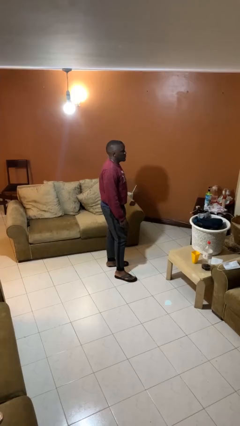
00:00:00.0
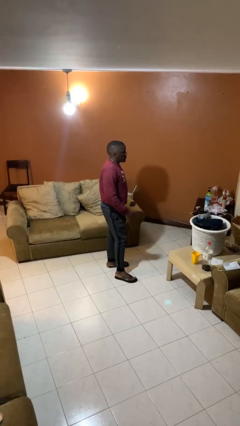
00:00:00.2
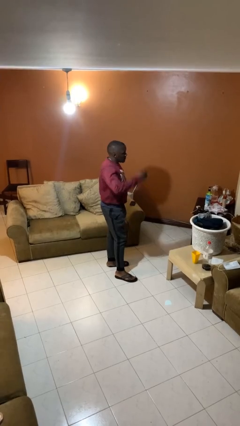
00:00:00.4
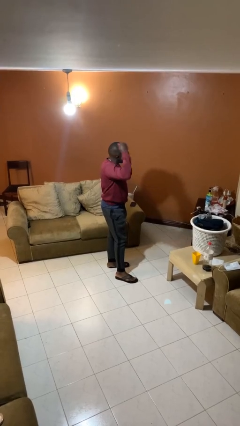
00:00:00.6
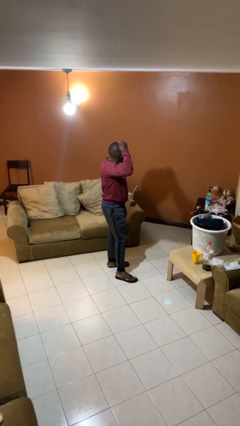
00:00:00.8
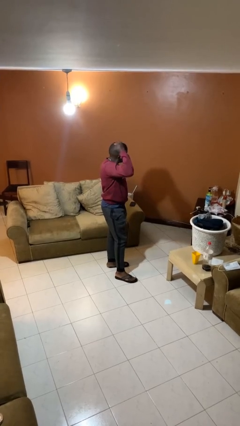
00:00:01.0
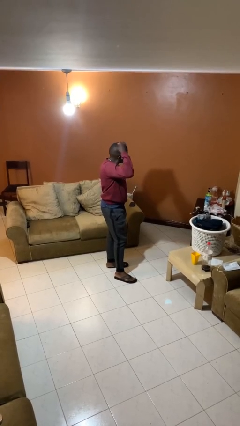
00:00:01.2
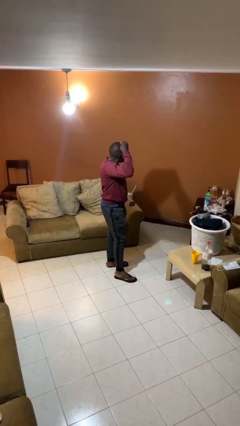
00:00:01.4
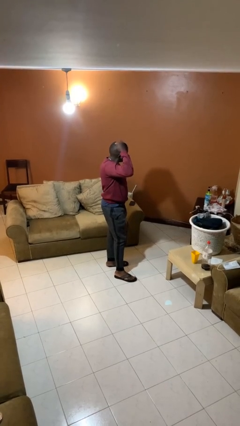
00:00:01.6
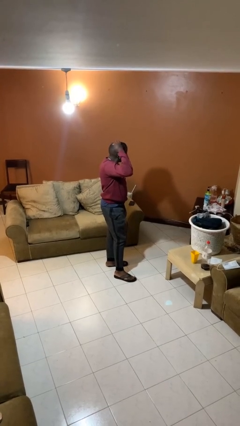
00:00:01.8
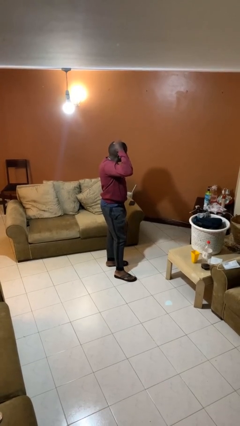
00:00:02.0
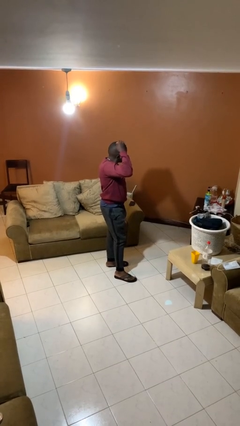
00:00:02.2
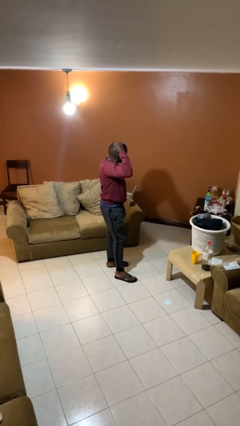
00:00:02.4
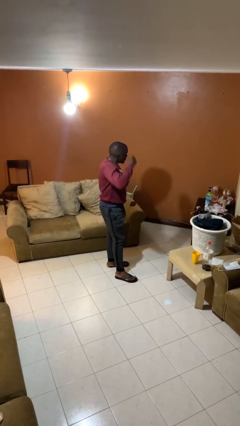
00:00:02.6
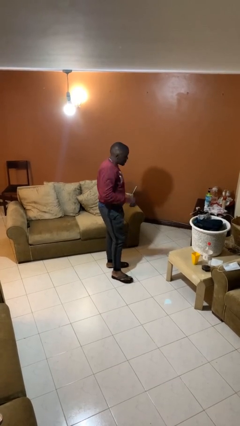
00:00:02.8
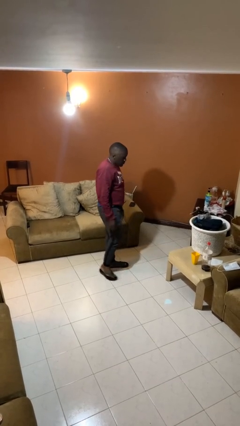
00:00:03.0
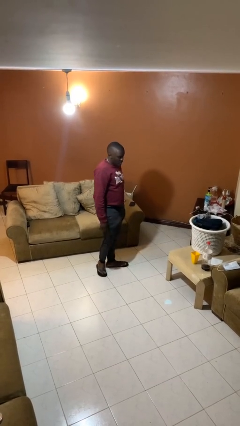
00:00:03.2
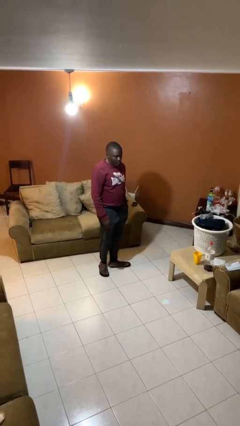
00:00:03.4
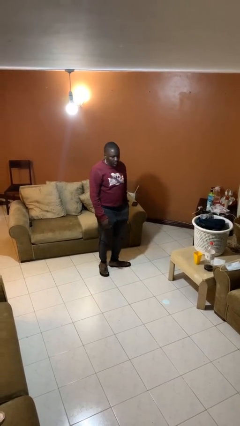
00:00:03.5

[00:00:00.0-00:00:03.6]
person scratches face

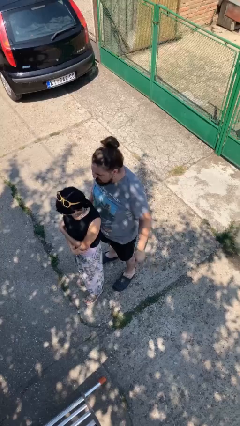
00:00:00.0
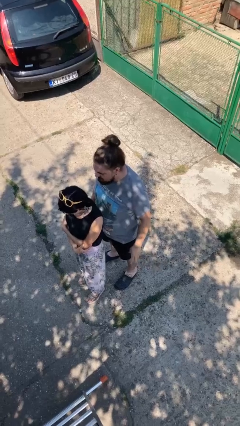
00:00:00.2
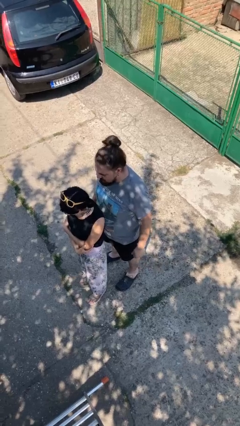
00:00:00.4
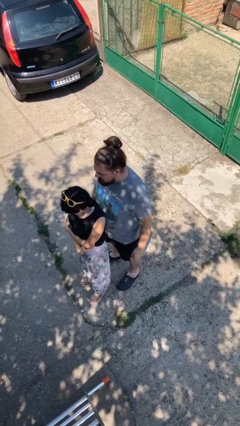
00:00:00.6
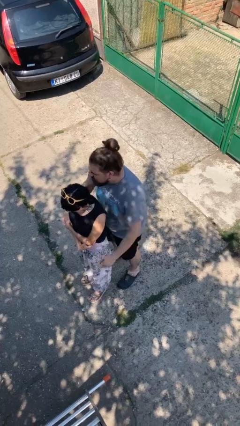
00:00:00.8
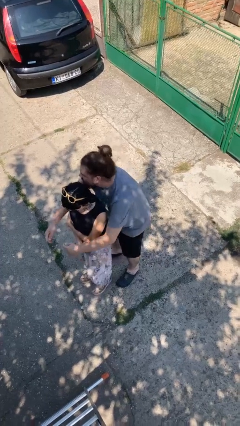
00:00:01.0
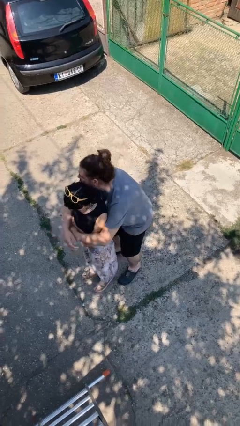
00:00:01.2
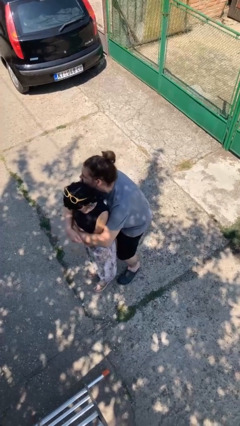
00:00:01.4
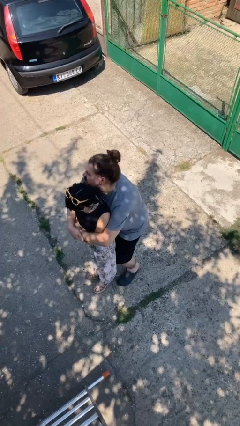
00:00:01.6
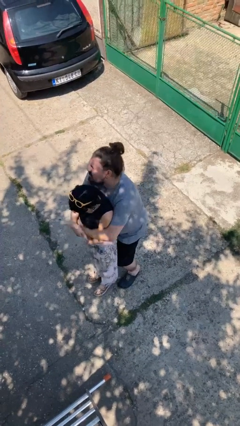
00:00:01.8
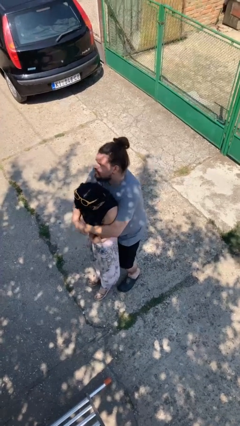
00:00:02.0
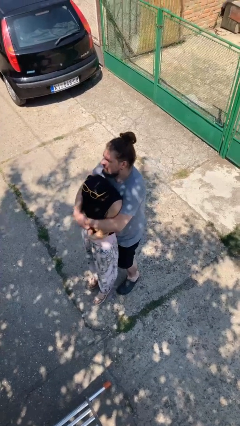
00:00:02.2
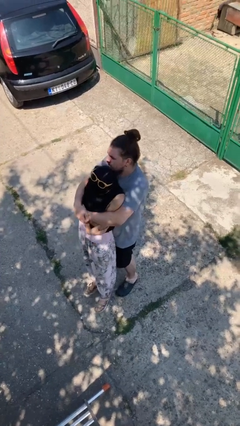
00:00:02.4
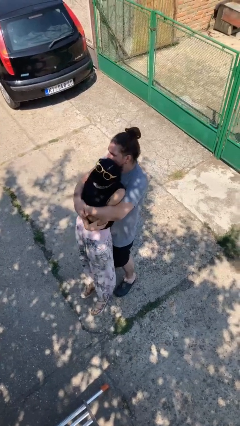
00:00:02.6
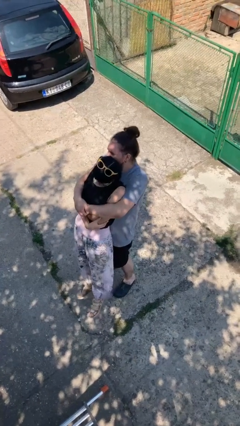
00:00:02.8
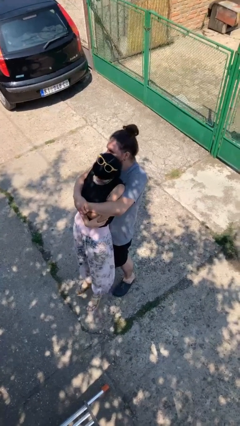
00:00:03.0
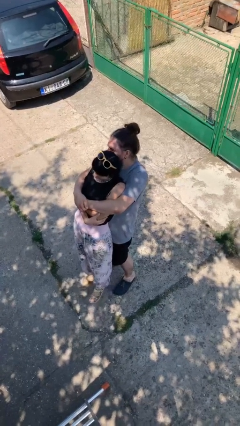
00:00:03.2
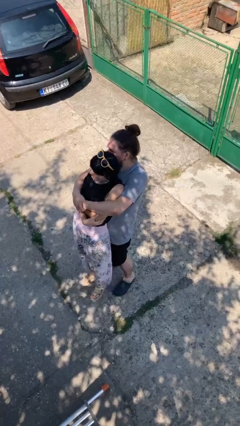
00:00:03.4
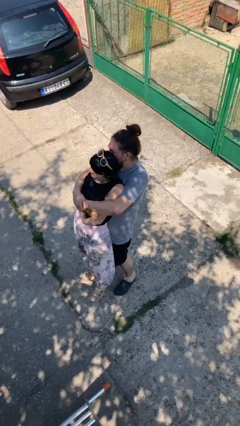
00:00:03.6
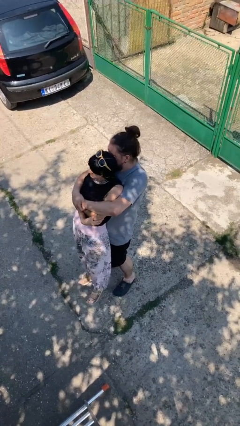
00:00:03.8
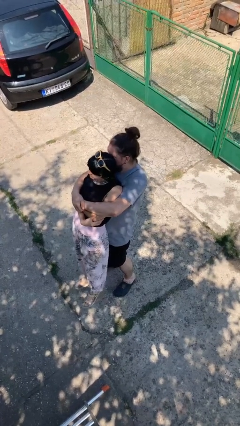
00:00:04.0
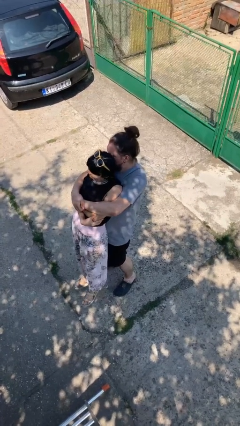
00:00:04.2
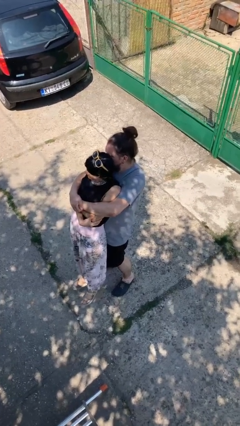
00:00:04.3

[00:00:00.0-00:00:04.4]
person picks up person

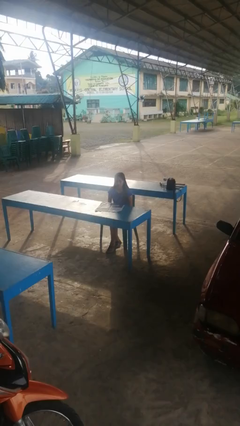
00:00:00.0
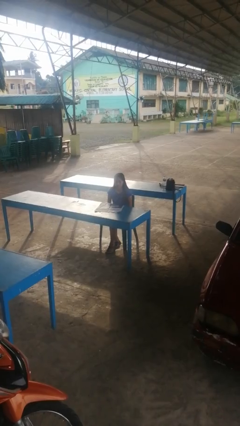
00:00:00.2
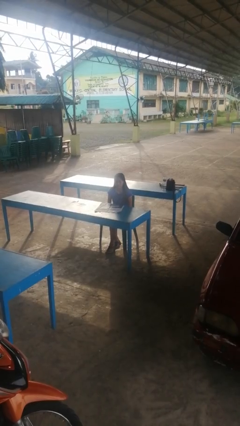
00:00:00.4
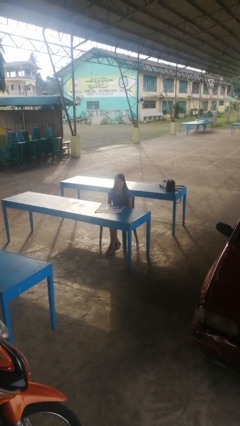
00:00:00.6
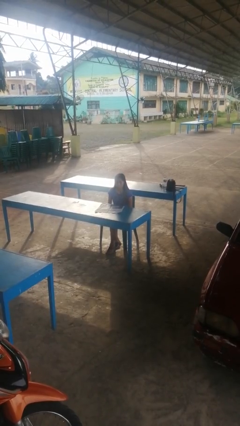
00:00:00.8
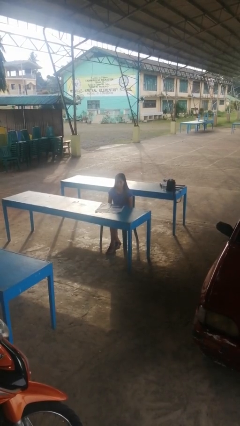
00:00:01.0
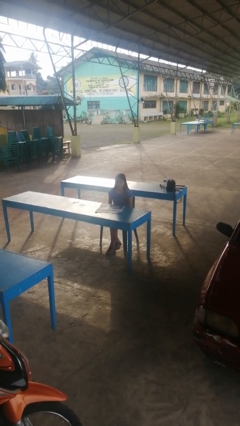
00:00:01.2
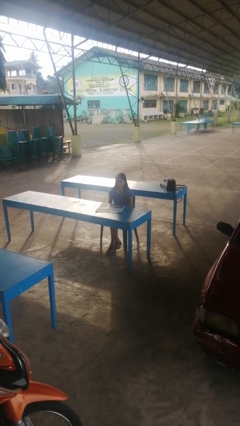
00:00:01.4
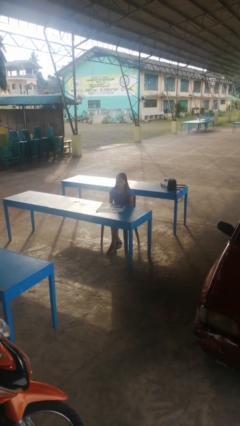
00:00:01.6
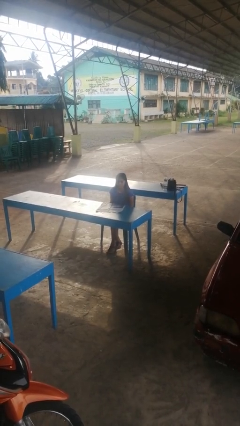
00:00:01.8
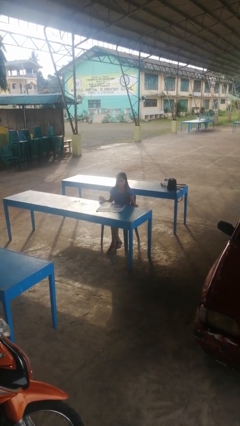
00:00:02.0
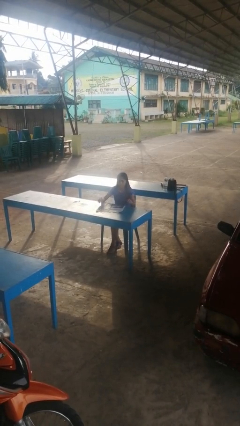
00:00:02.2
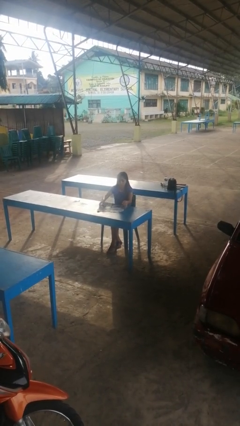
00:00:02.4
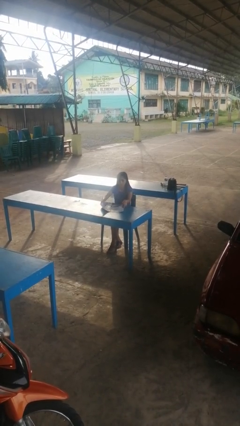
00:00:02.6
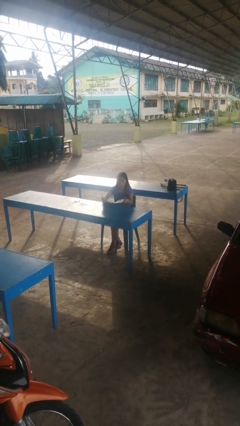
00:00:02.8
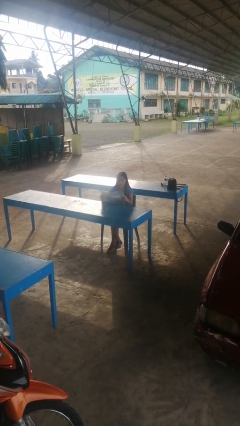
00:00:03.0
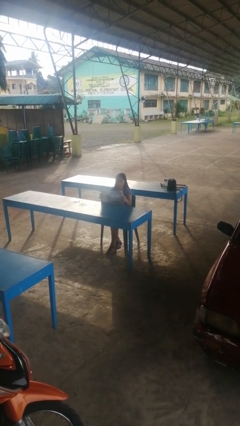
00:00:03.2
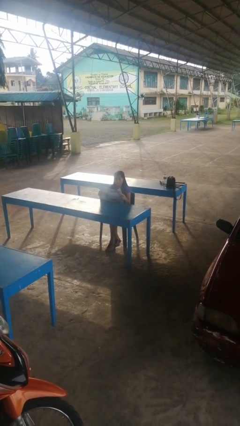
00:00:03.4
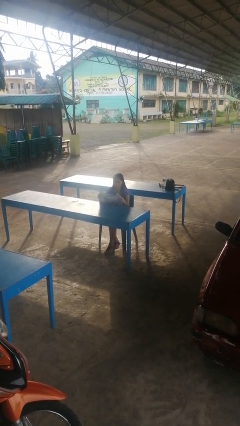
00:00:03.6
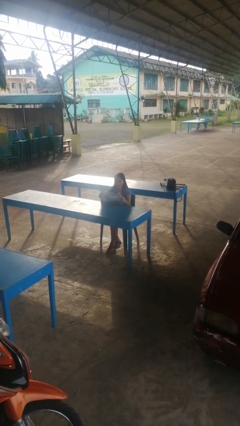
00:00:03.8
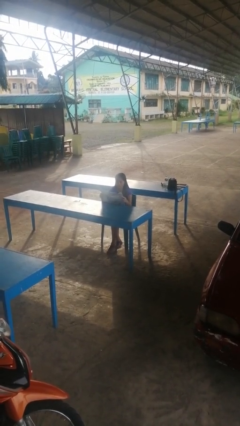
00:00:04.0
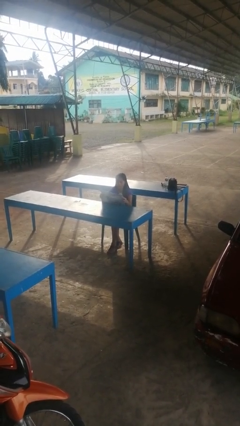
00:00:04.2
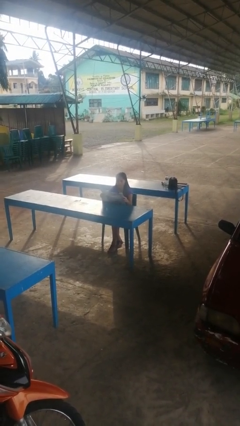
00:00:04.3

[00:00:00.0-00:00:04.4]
person reads newspaper

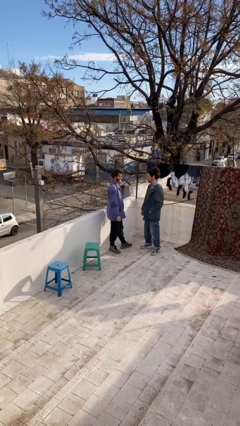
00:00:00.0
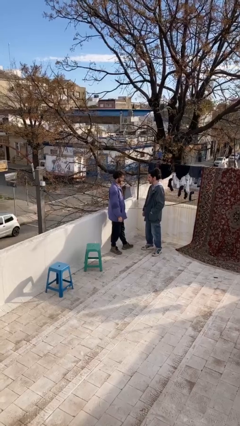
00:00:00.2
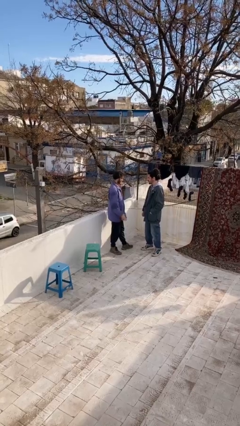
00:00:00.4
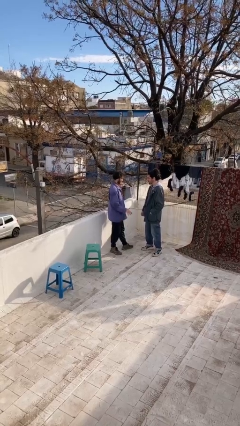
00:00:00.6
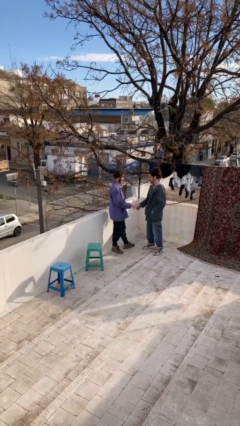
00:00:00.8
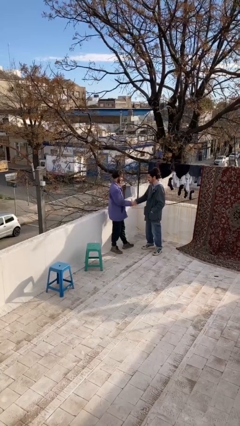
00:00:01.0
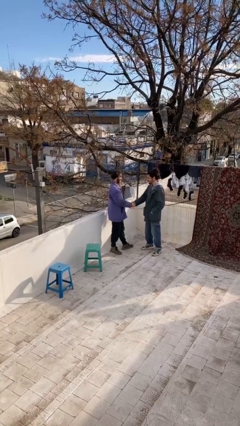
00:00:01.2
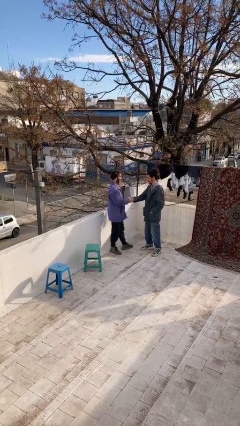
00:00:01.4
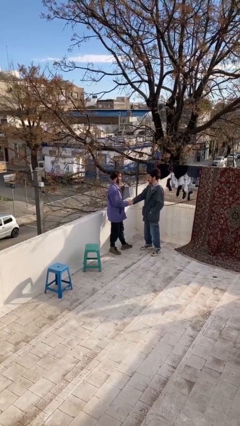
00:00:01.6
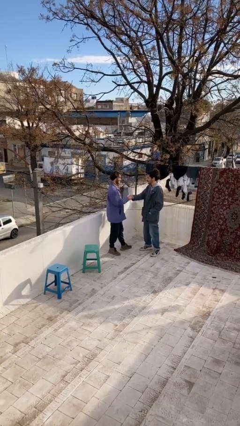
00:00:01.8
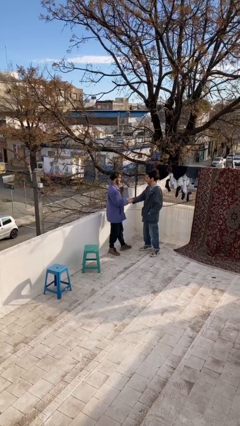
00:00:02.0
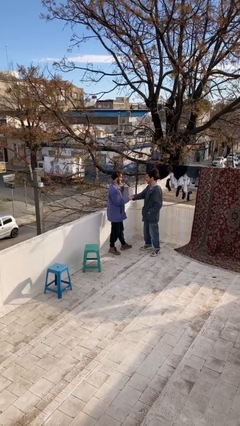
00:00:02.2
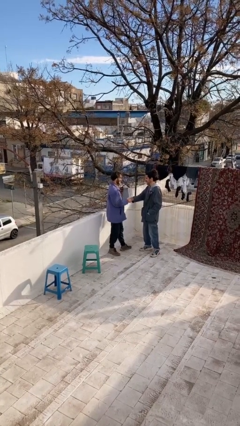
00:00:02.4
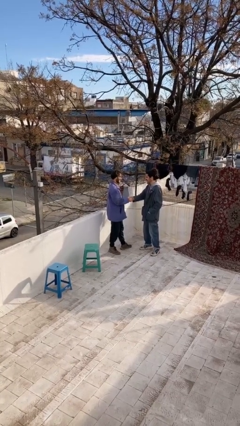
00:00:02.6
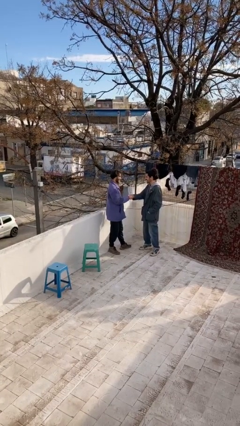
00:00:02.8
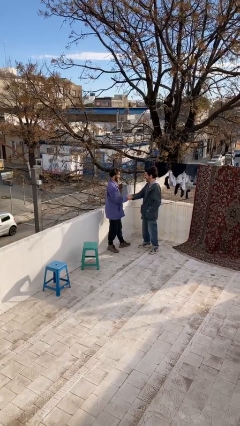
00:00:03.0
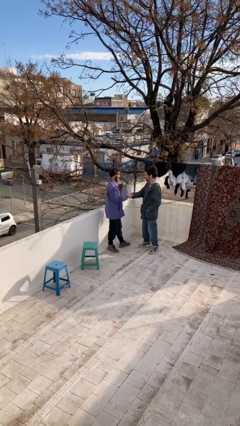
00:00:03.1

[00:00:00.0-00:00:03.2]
person shakes hand

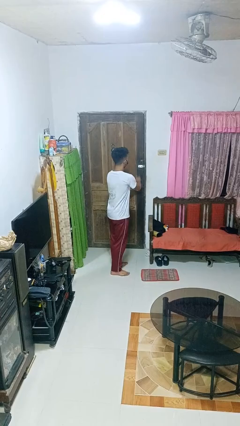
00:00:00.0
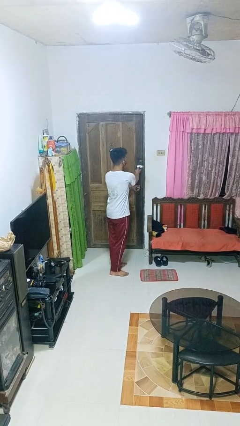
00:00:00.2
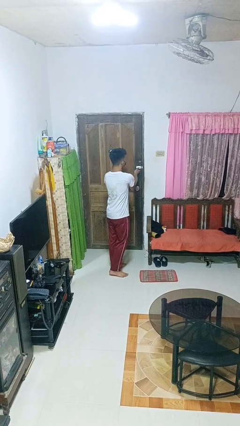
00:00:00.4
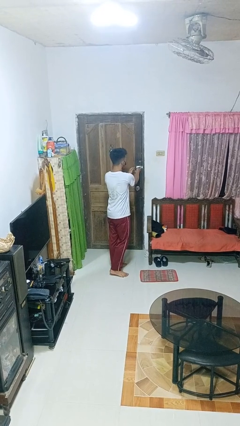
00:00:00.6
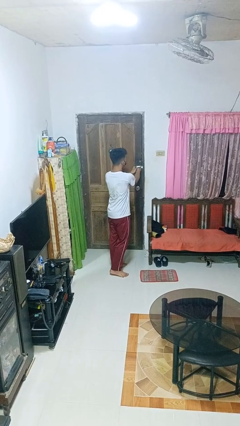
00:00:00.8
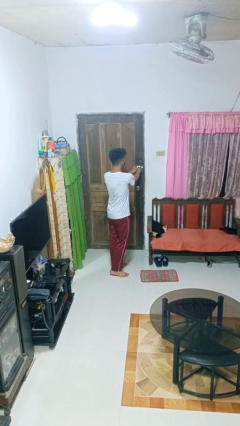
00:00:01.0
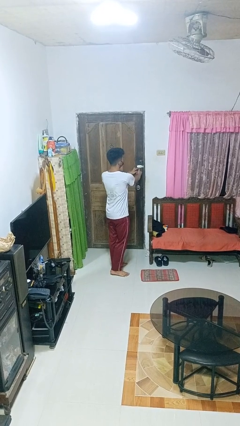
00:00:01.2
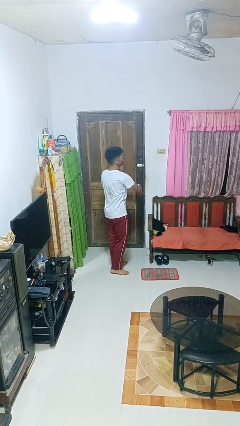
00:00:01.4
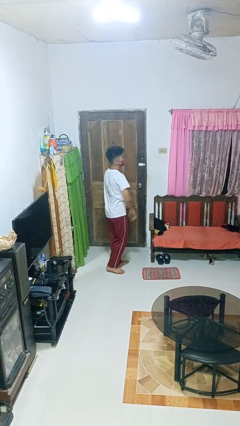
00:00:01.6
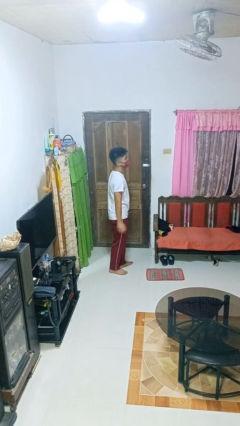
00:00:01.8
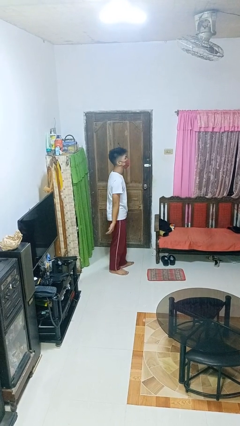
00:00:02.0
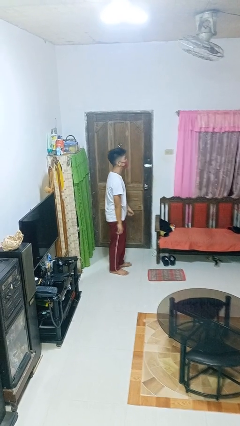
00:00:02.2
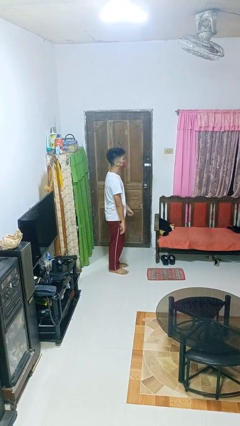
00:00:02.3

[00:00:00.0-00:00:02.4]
person locks door with keys
